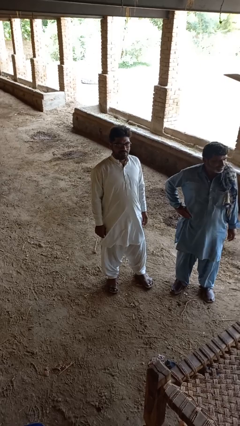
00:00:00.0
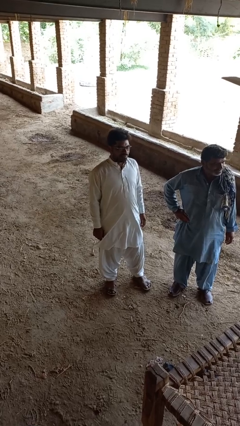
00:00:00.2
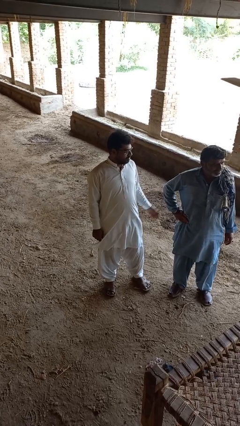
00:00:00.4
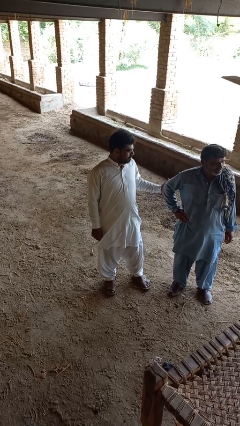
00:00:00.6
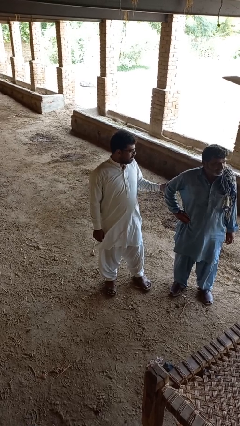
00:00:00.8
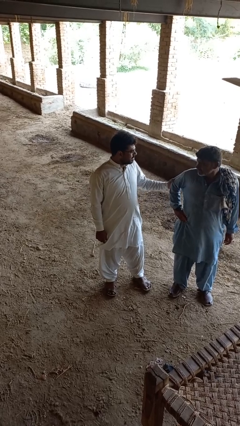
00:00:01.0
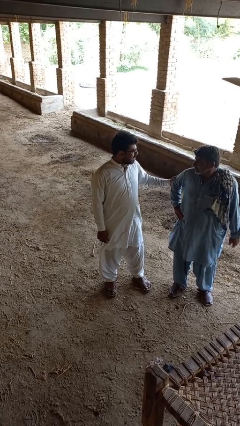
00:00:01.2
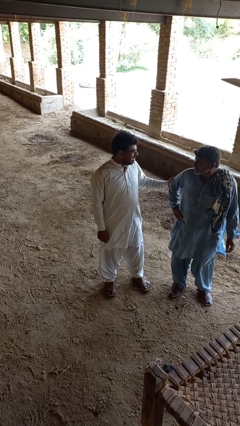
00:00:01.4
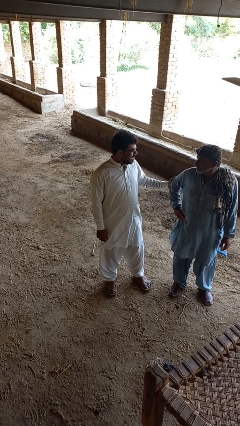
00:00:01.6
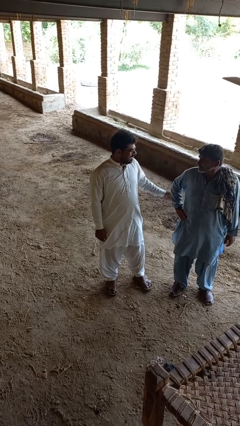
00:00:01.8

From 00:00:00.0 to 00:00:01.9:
person grabs person by forearm

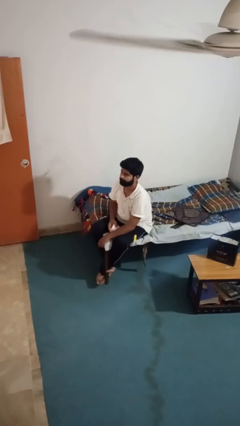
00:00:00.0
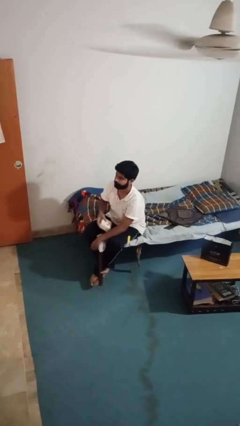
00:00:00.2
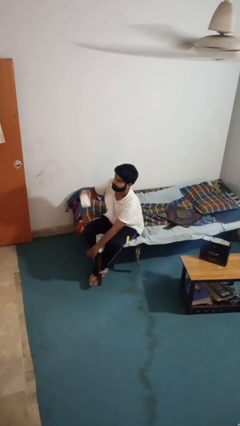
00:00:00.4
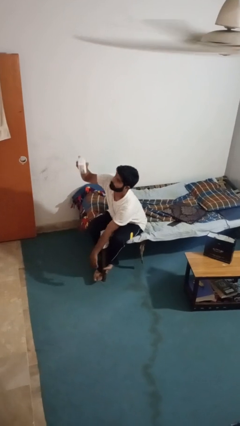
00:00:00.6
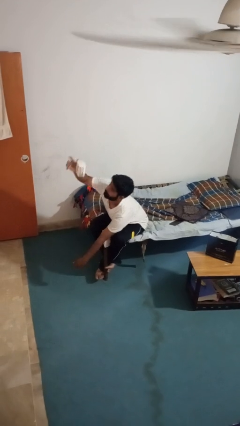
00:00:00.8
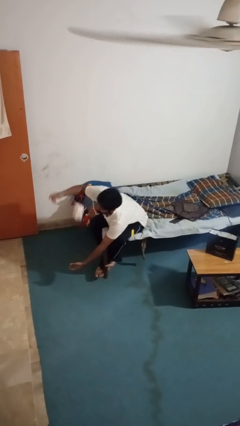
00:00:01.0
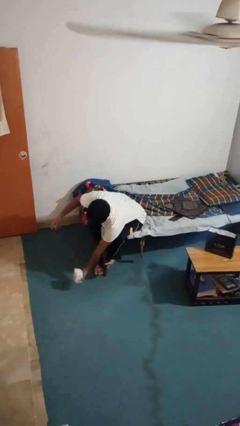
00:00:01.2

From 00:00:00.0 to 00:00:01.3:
person drops object

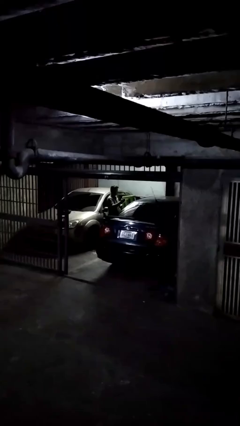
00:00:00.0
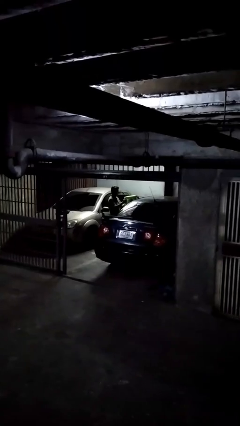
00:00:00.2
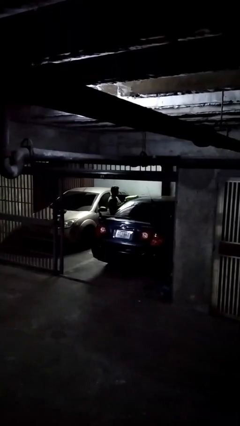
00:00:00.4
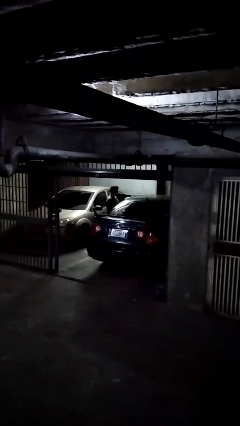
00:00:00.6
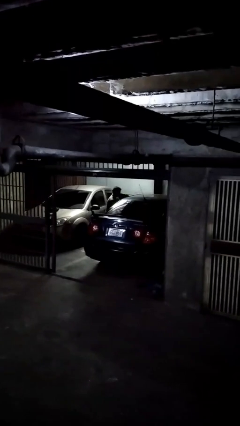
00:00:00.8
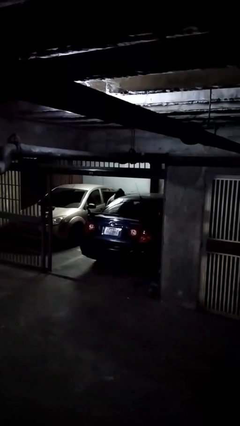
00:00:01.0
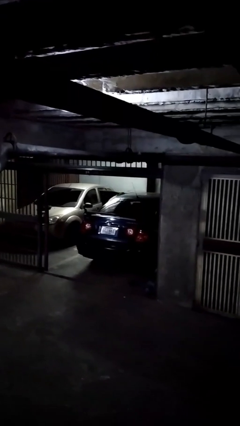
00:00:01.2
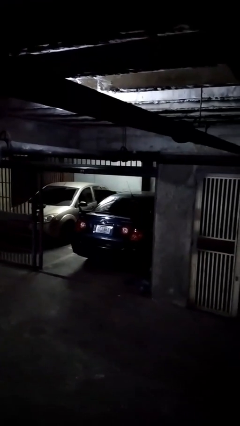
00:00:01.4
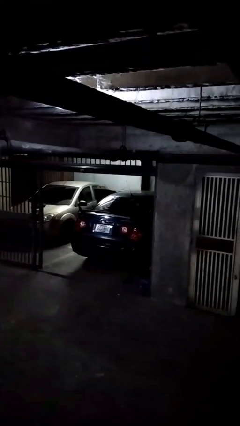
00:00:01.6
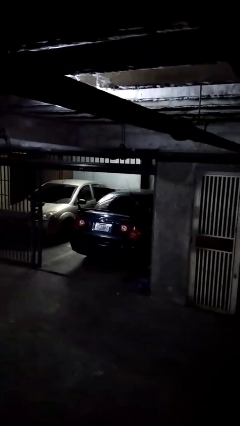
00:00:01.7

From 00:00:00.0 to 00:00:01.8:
person loads car

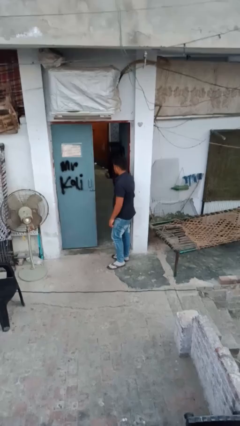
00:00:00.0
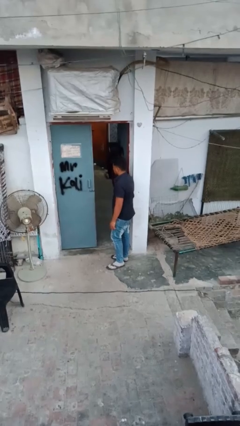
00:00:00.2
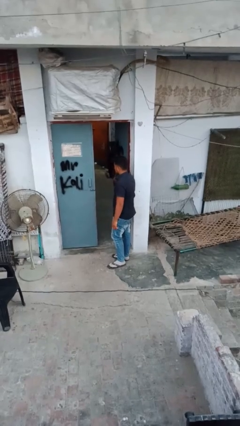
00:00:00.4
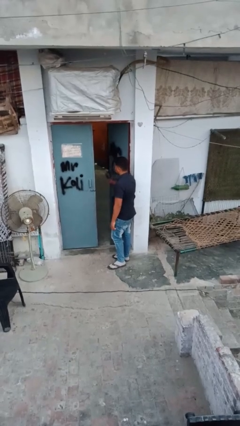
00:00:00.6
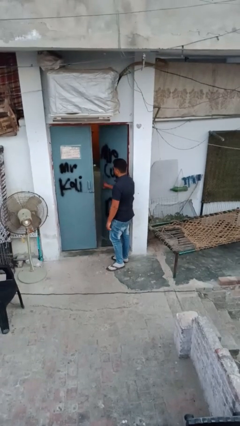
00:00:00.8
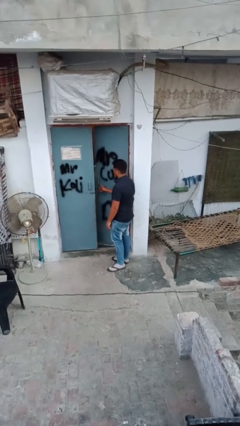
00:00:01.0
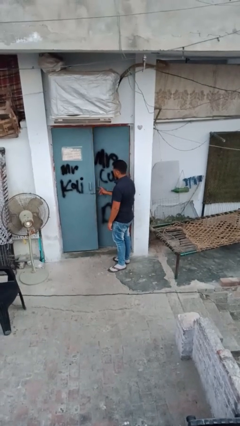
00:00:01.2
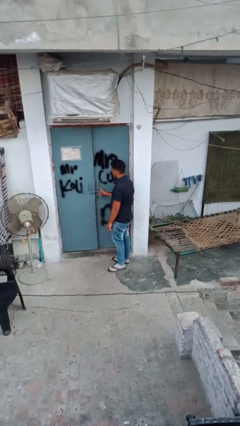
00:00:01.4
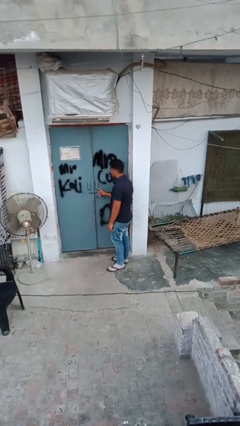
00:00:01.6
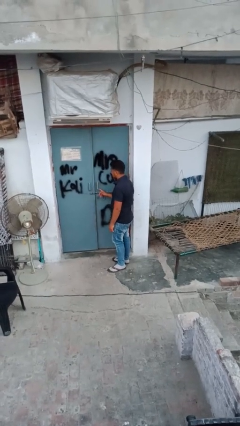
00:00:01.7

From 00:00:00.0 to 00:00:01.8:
person closes facility door

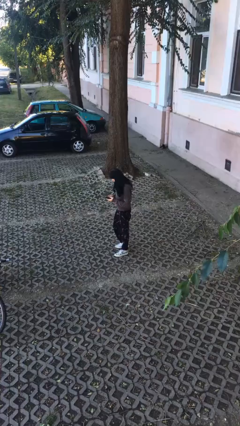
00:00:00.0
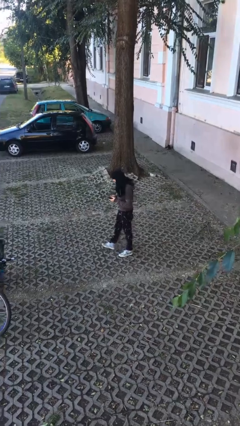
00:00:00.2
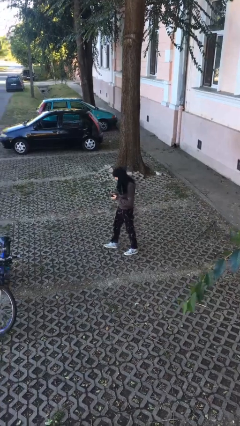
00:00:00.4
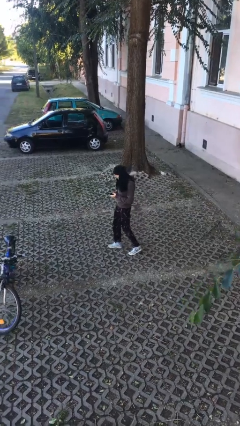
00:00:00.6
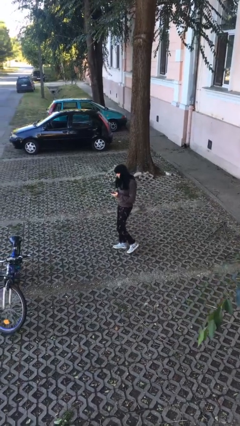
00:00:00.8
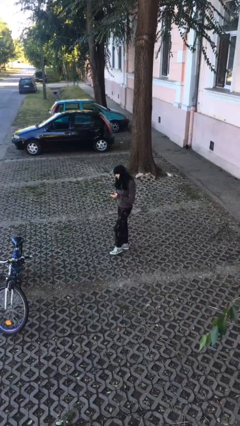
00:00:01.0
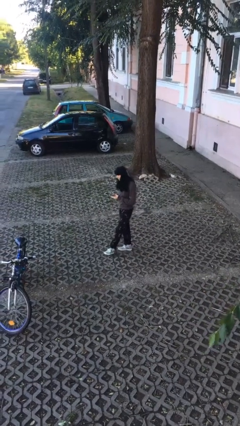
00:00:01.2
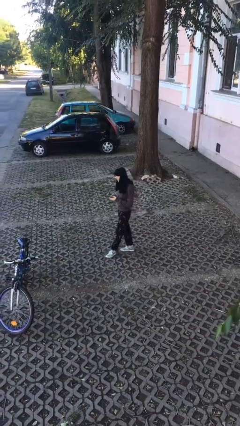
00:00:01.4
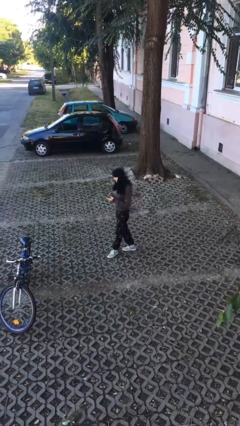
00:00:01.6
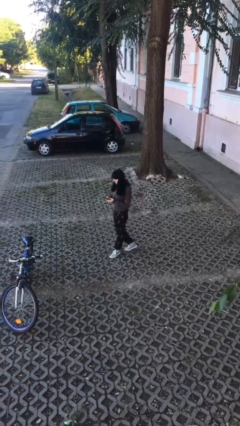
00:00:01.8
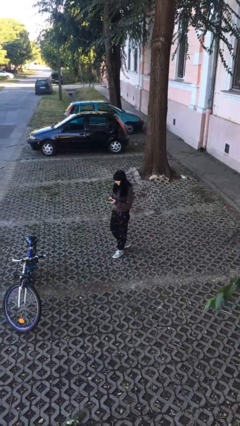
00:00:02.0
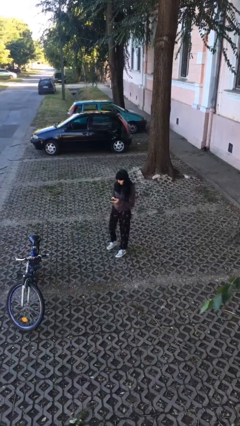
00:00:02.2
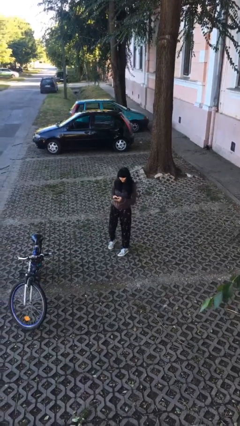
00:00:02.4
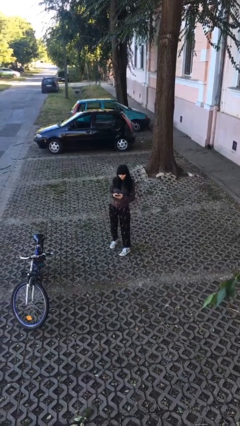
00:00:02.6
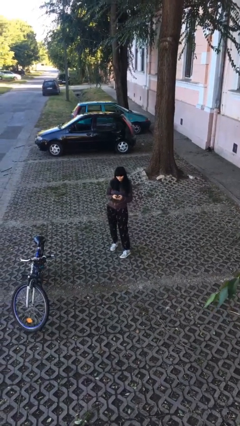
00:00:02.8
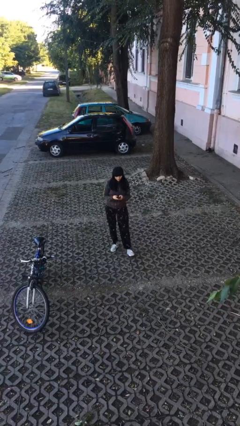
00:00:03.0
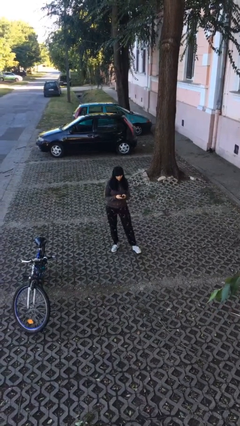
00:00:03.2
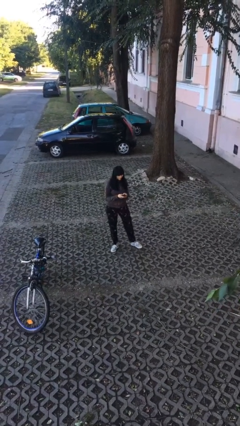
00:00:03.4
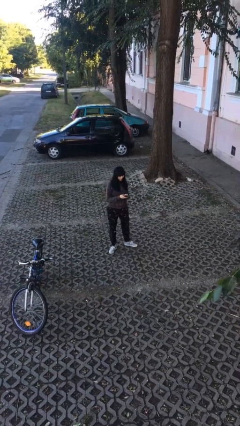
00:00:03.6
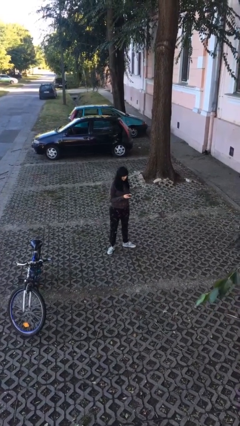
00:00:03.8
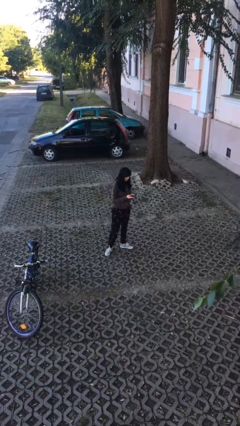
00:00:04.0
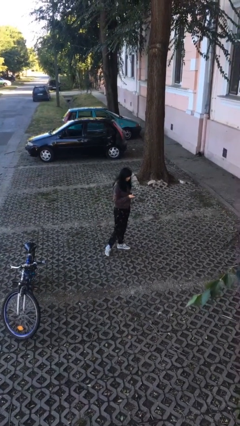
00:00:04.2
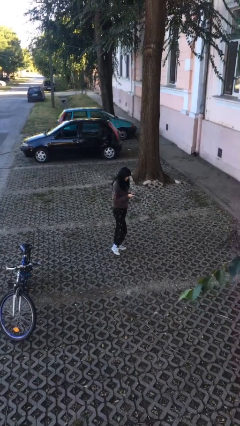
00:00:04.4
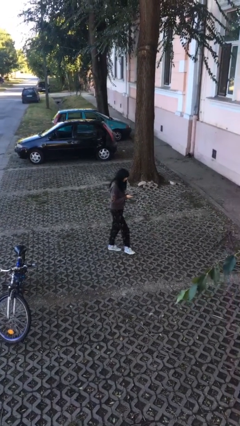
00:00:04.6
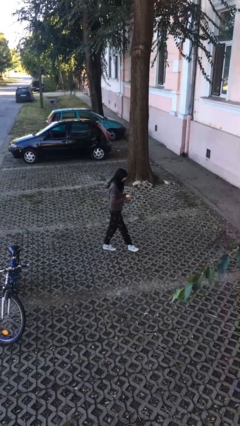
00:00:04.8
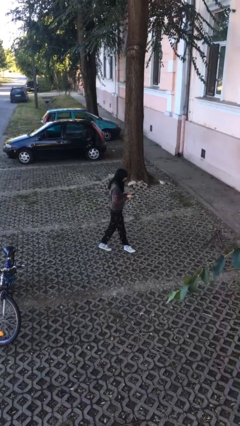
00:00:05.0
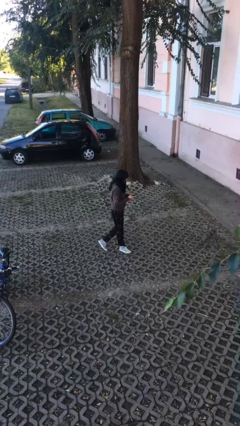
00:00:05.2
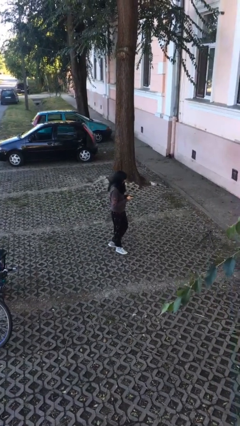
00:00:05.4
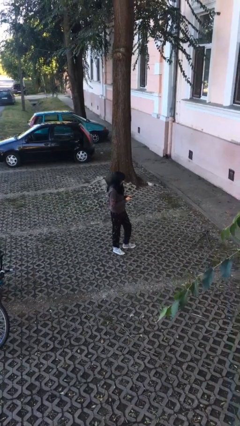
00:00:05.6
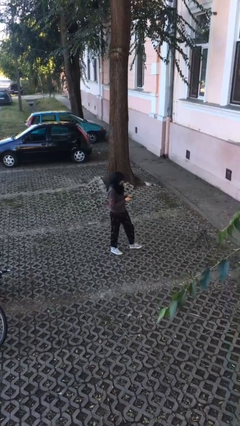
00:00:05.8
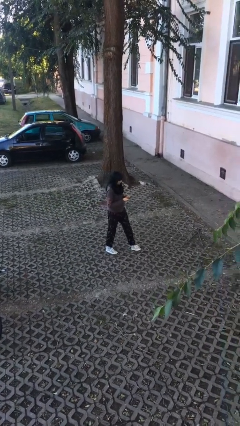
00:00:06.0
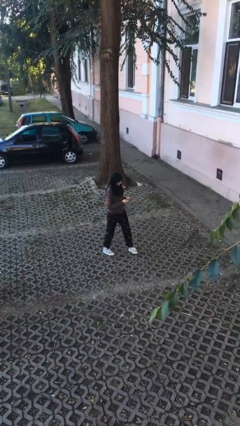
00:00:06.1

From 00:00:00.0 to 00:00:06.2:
person texts on phone

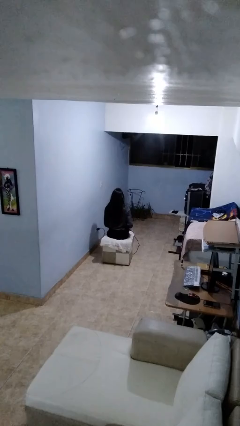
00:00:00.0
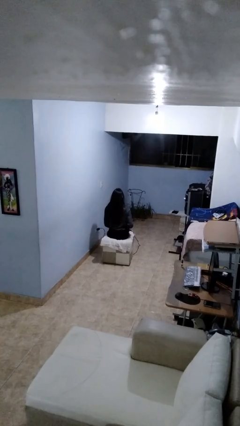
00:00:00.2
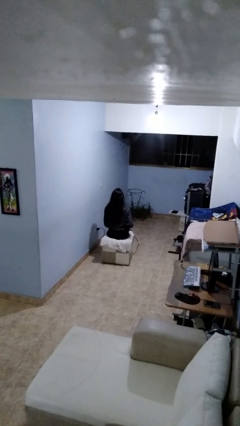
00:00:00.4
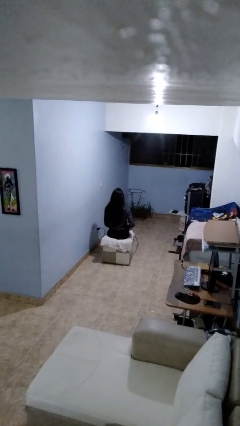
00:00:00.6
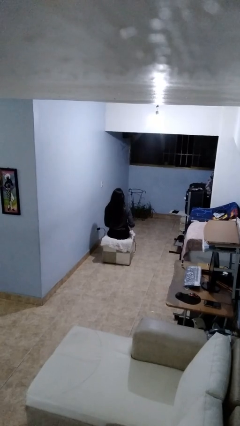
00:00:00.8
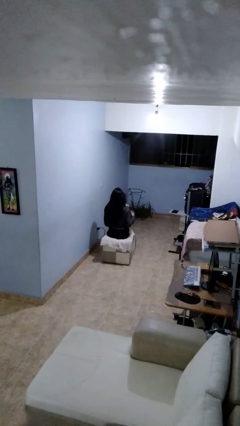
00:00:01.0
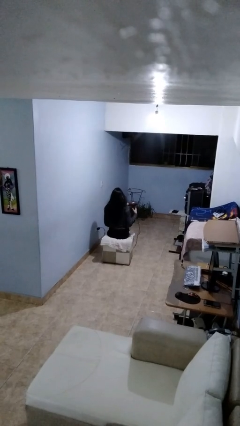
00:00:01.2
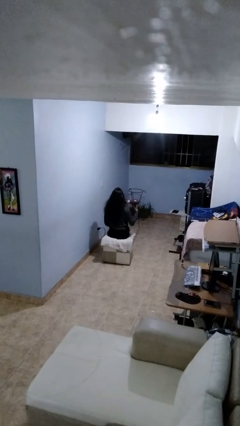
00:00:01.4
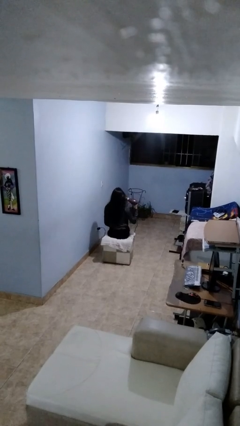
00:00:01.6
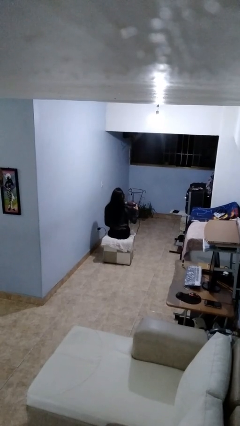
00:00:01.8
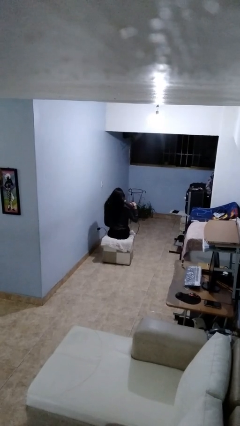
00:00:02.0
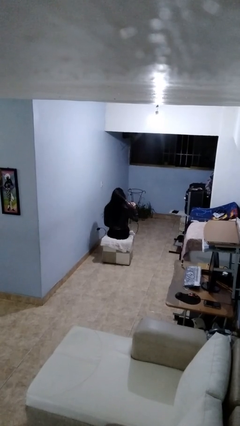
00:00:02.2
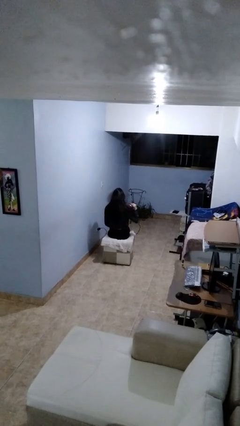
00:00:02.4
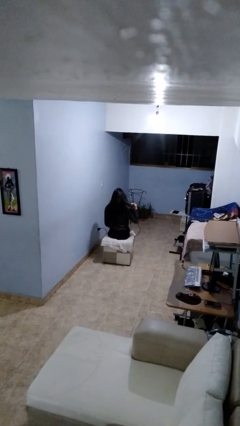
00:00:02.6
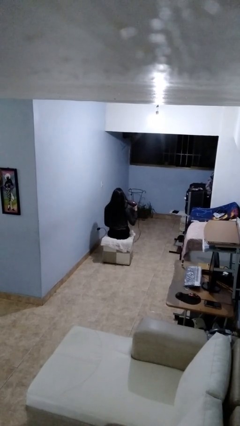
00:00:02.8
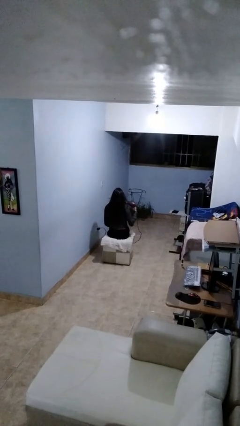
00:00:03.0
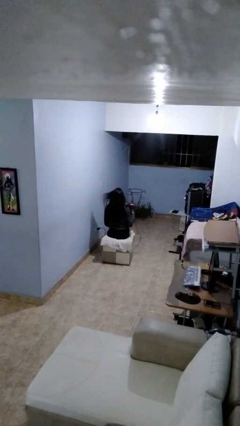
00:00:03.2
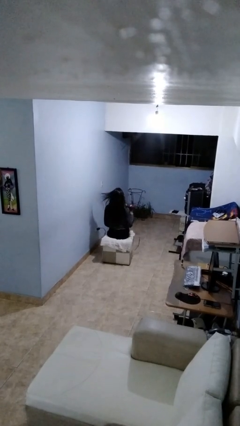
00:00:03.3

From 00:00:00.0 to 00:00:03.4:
person dries hair with hairdryer

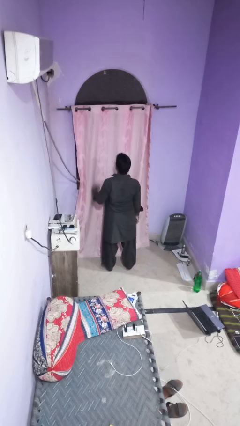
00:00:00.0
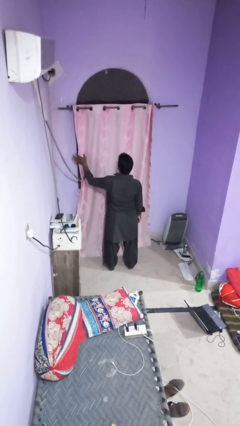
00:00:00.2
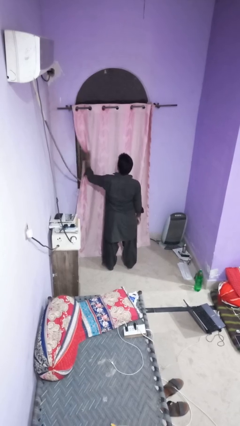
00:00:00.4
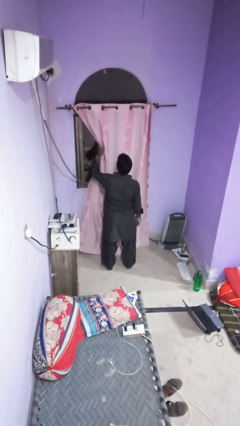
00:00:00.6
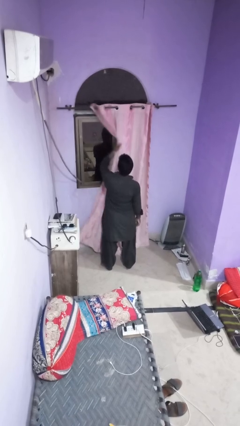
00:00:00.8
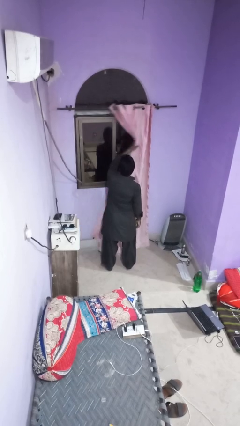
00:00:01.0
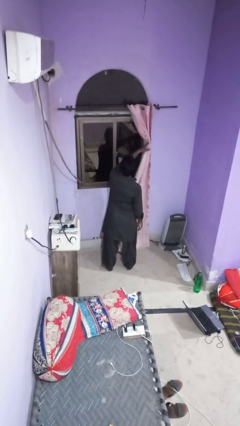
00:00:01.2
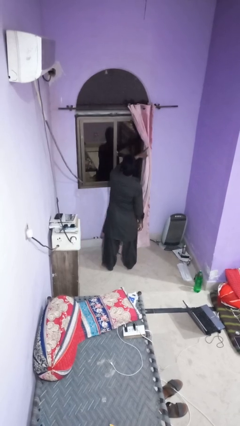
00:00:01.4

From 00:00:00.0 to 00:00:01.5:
person opens curtains
